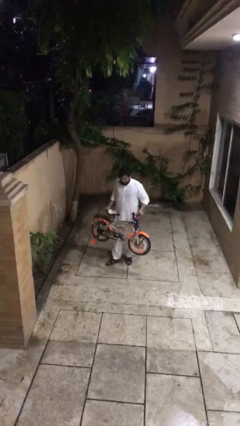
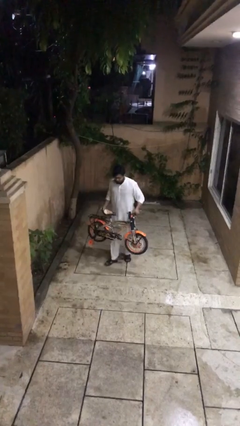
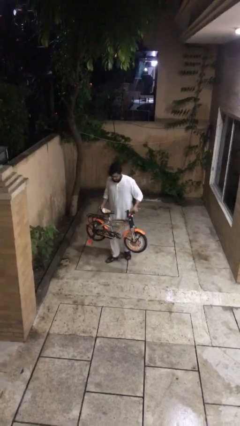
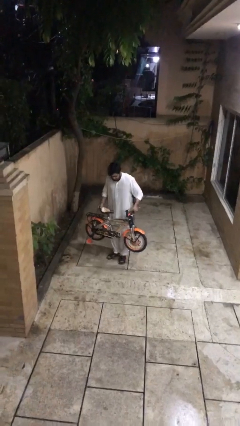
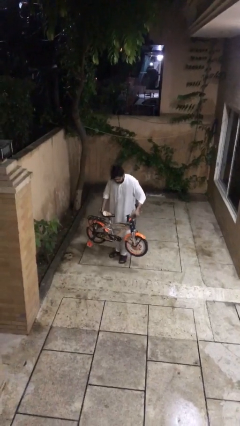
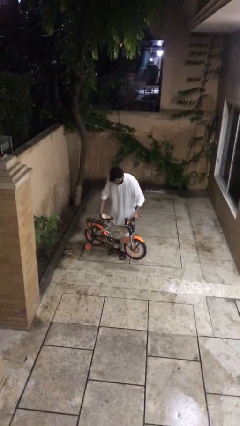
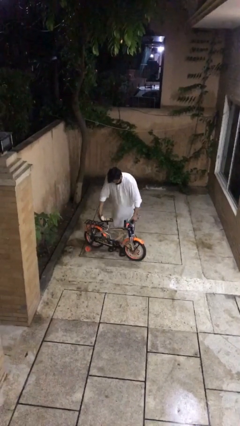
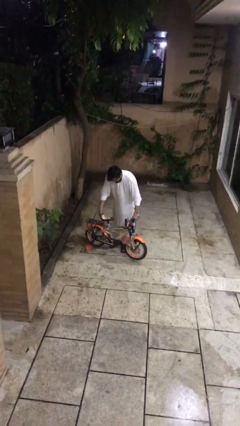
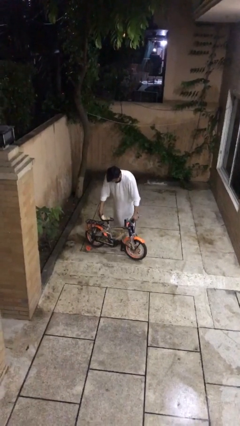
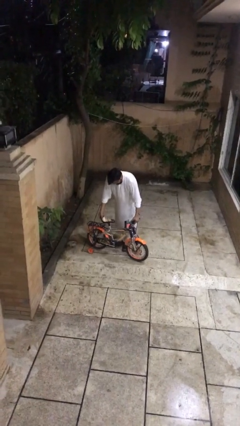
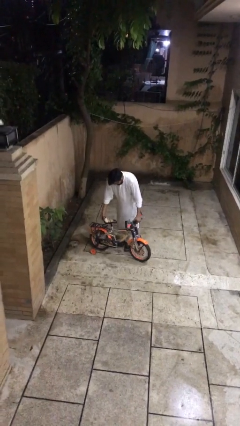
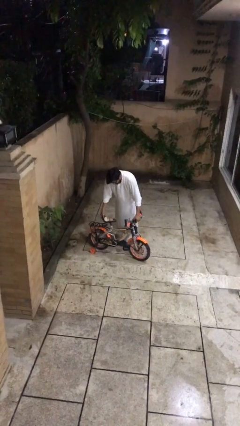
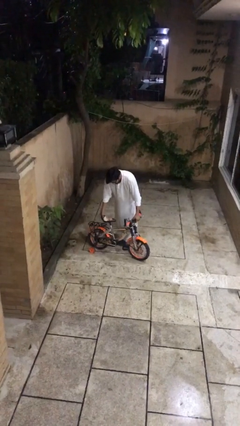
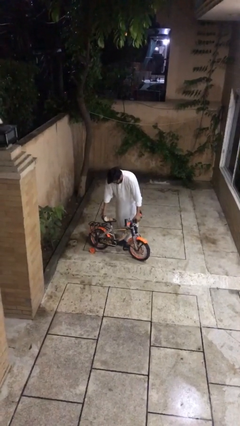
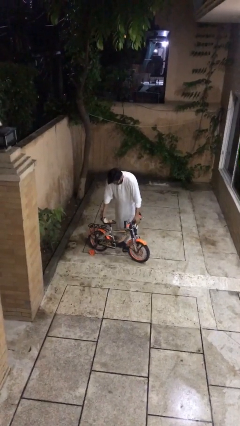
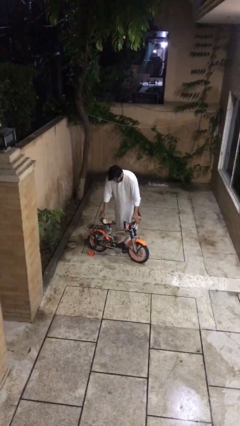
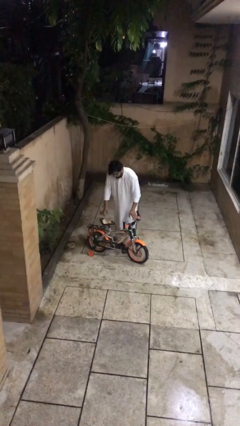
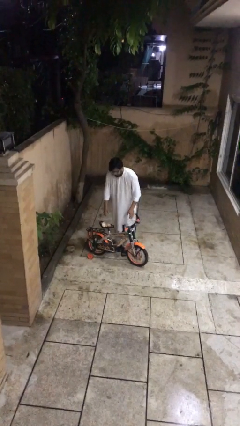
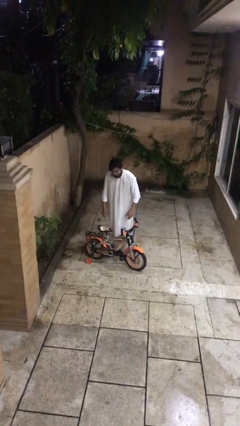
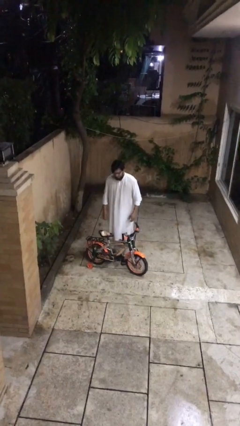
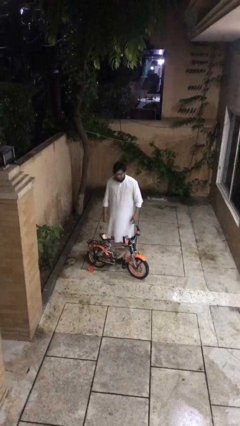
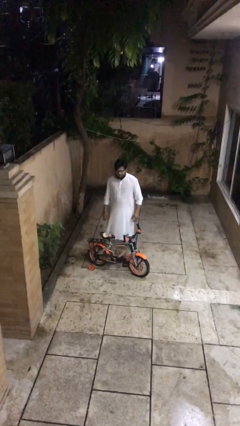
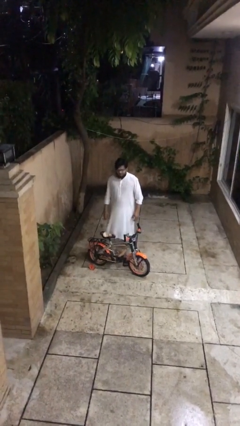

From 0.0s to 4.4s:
person puts down object on floor

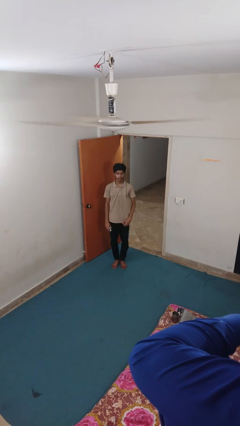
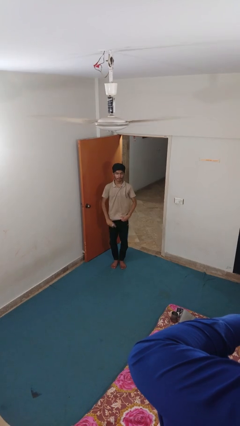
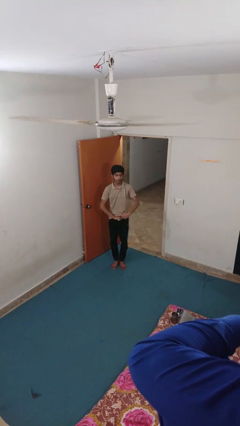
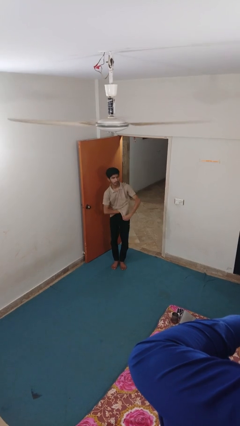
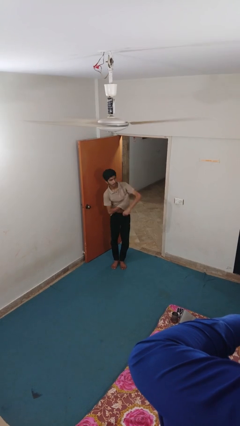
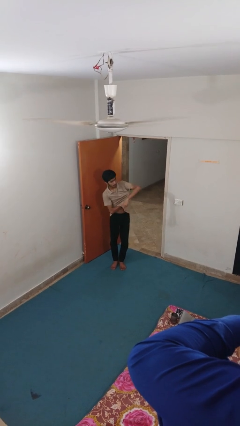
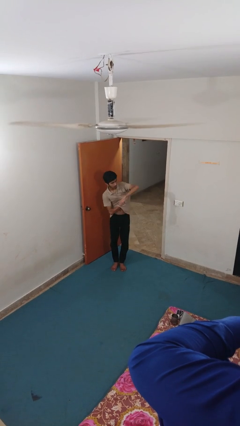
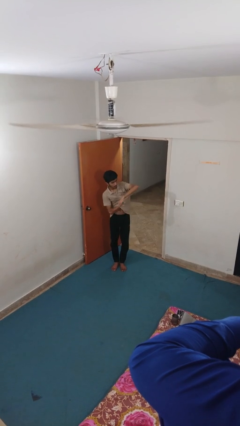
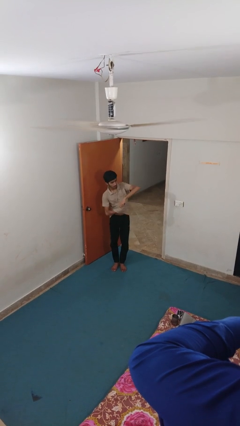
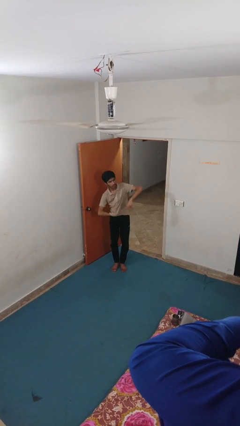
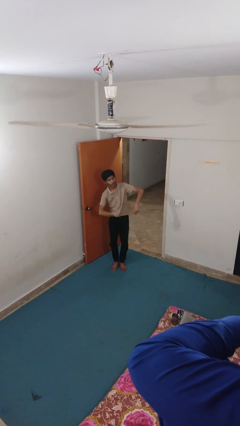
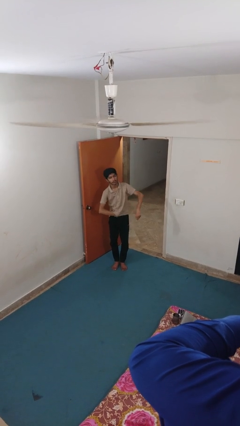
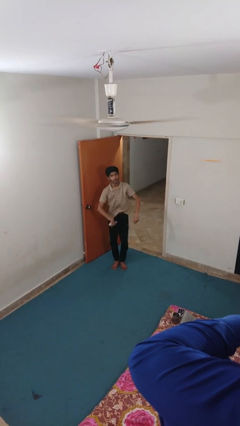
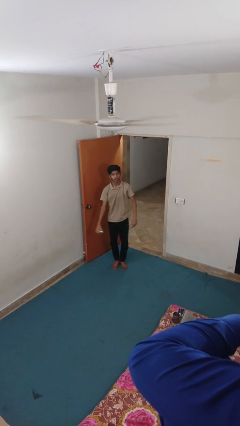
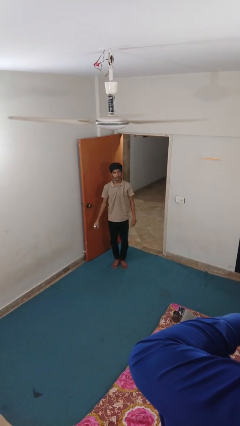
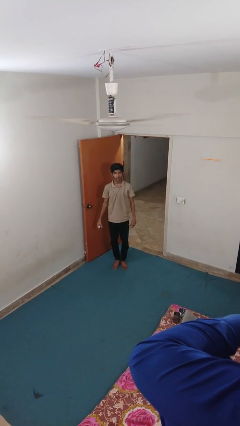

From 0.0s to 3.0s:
person applies deodorant

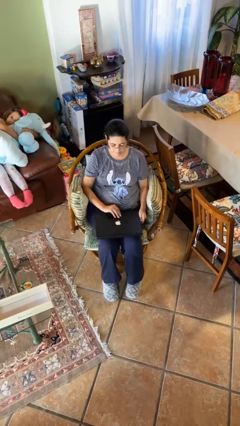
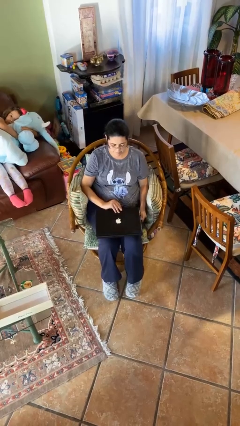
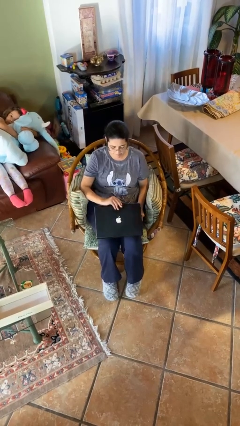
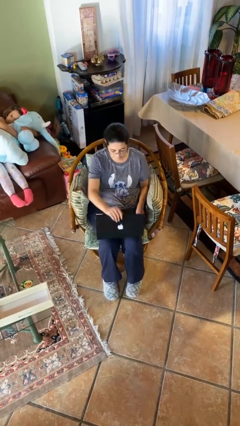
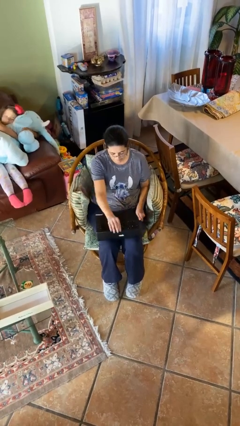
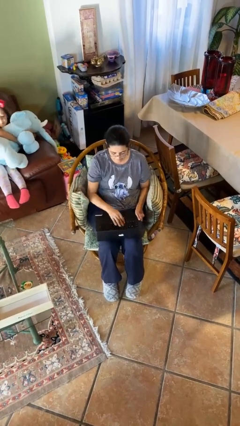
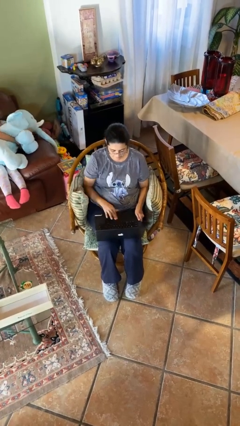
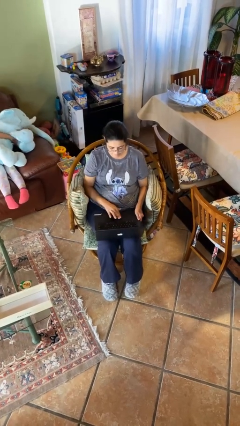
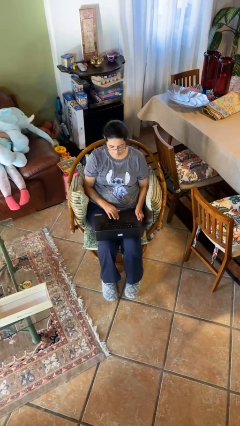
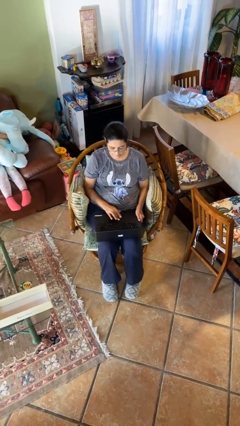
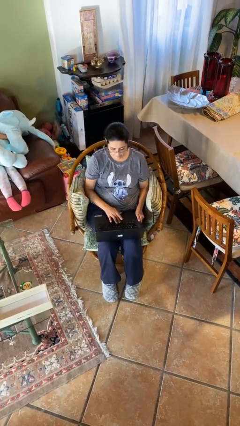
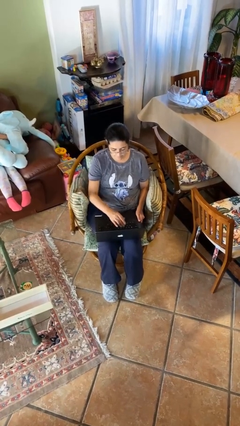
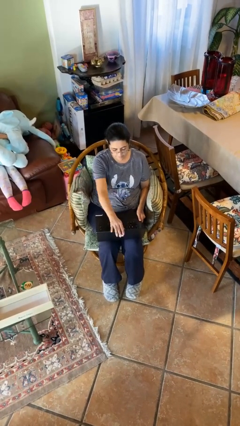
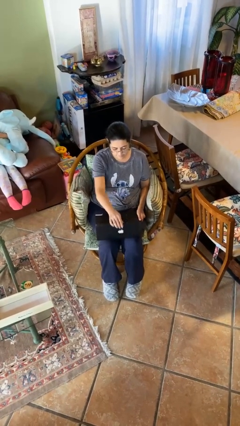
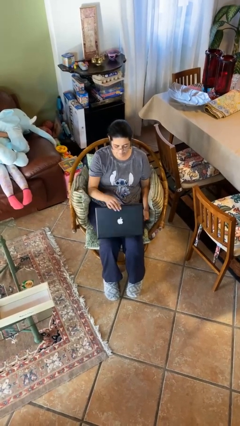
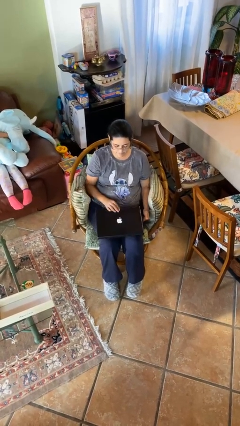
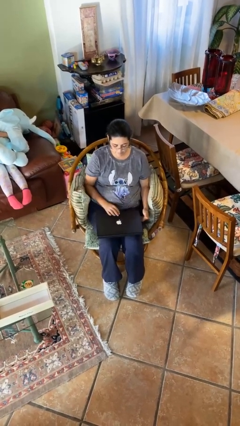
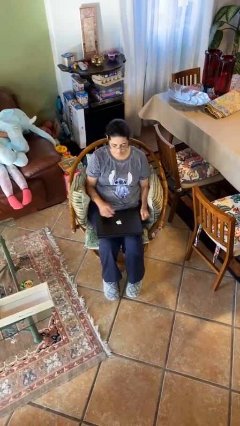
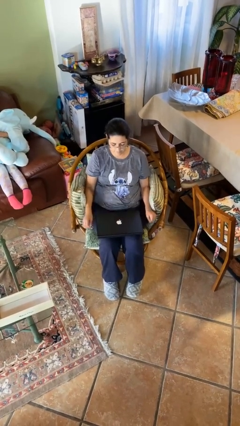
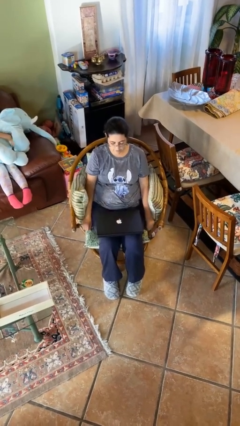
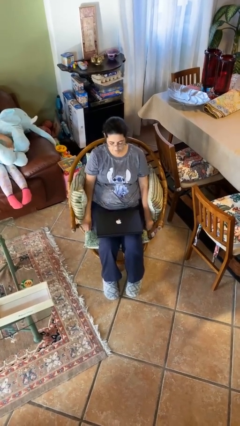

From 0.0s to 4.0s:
person interacts with laptop

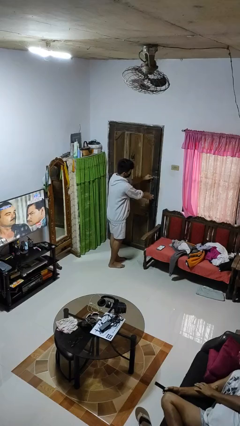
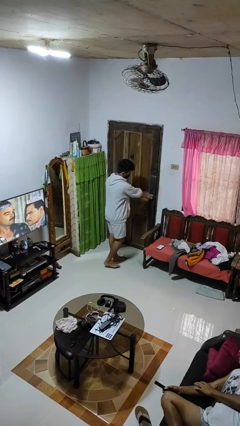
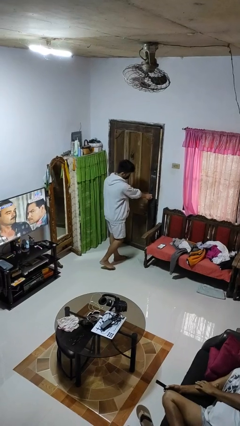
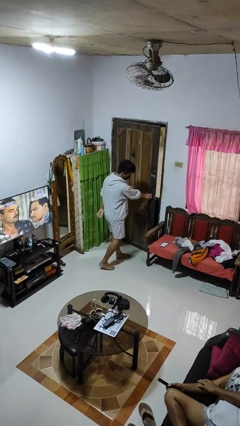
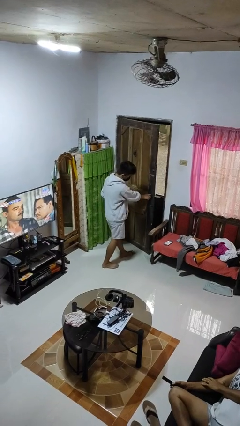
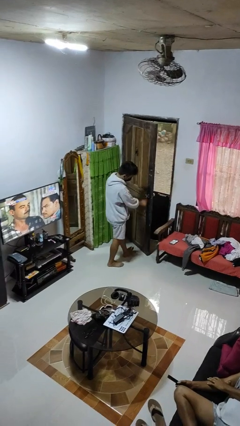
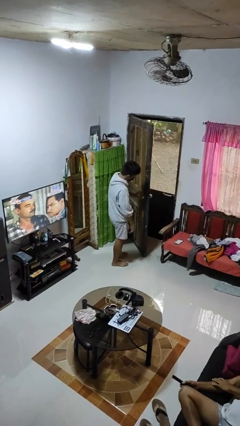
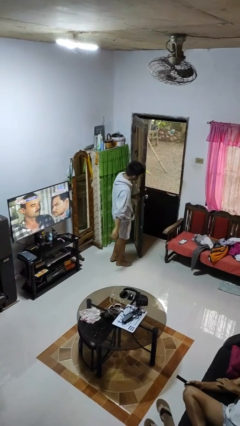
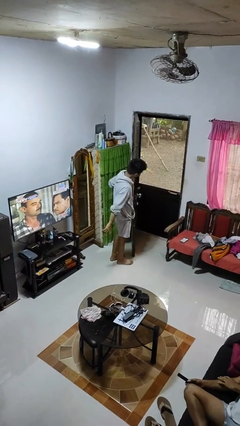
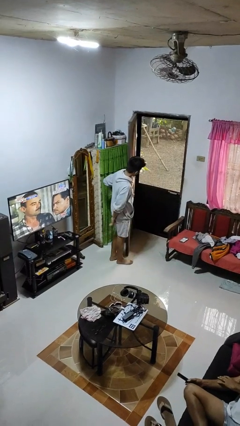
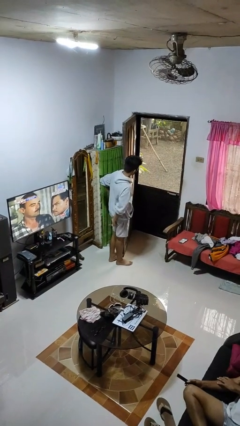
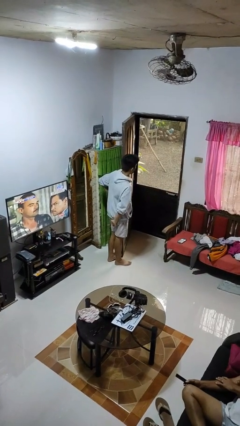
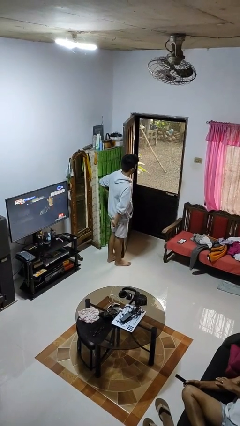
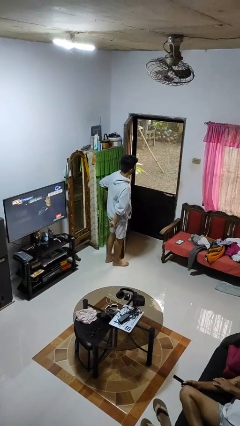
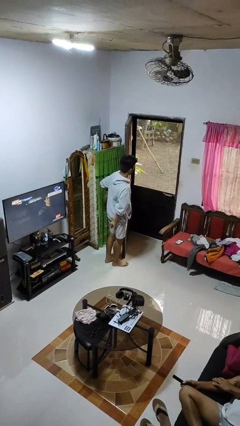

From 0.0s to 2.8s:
person opens facility door

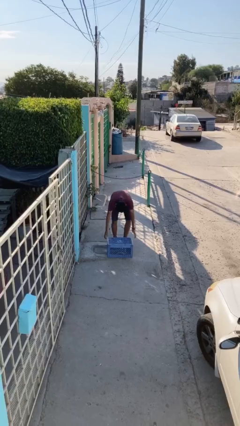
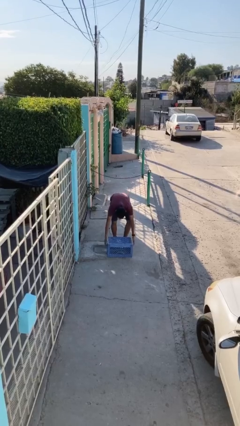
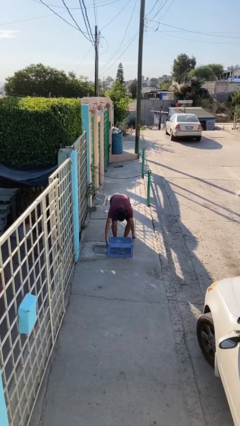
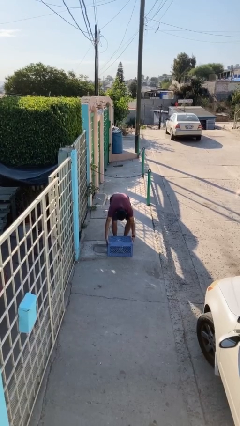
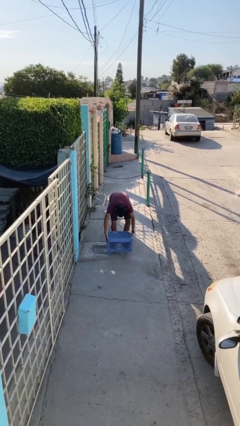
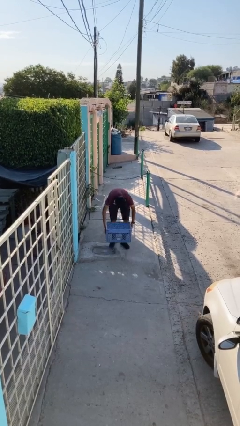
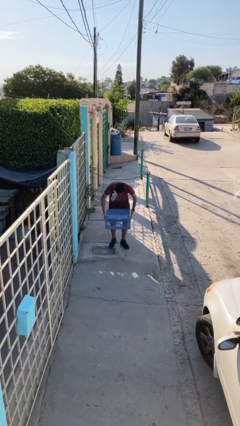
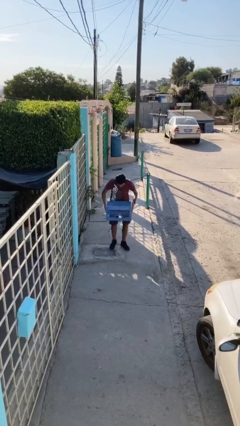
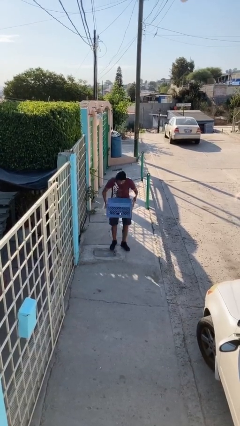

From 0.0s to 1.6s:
person picks up object from floor

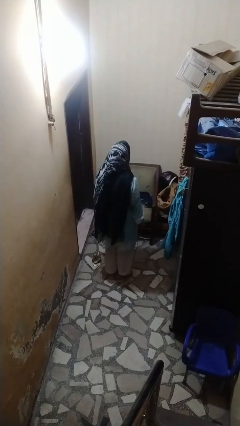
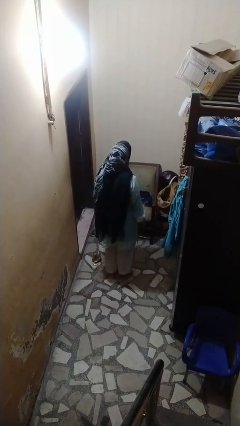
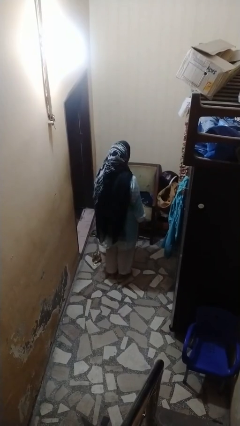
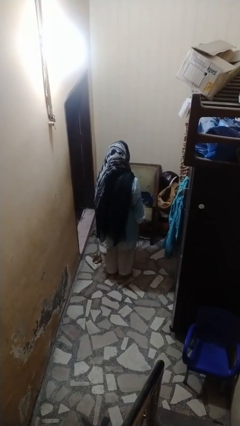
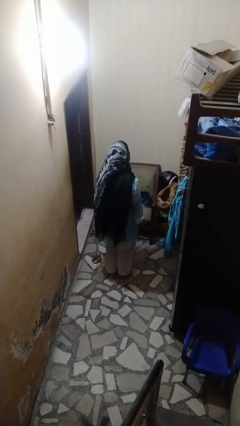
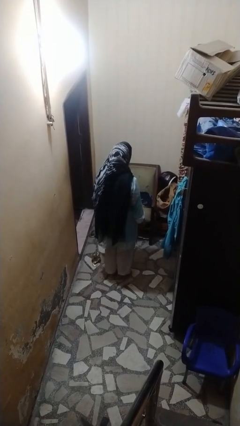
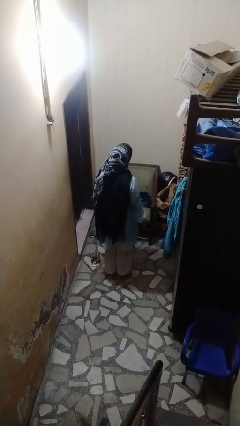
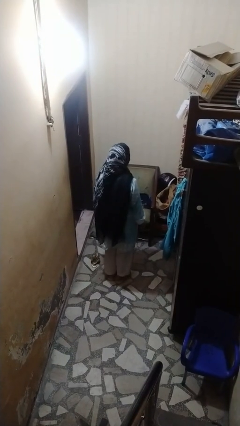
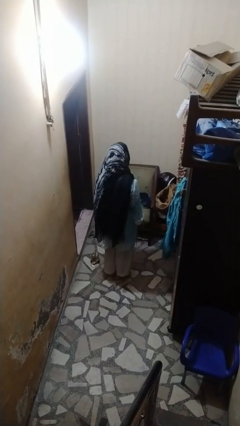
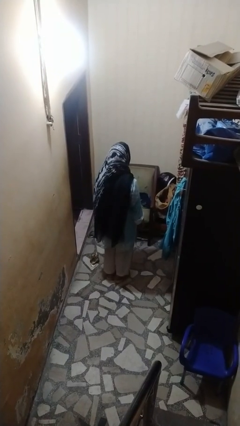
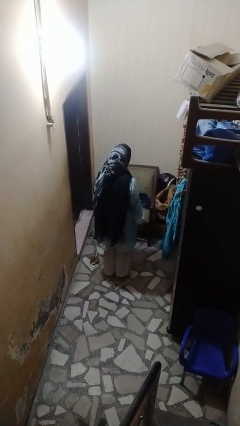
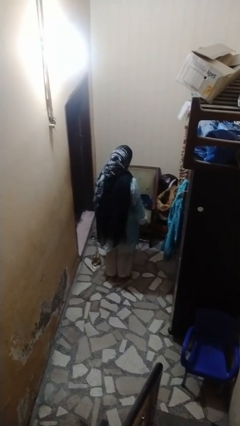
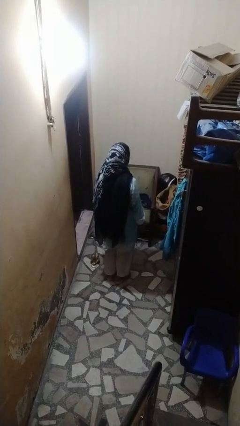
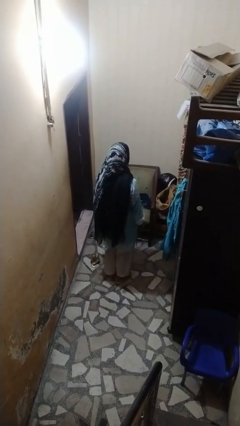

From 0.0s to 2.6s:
person sticks out tongue
